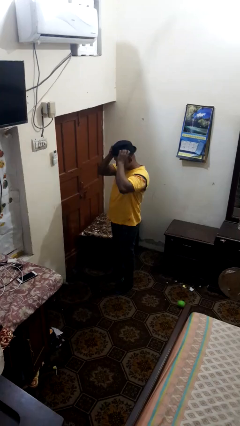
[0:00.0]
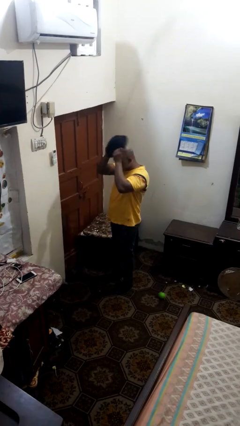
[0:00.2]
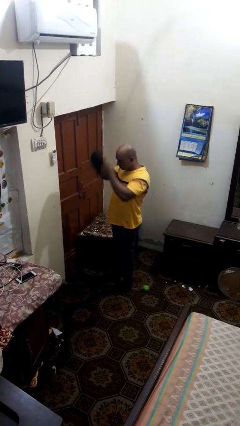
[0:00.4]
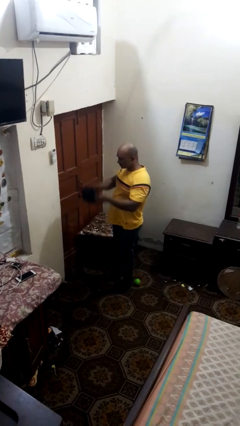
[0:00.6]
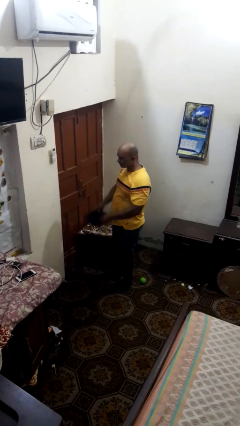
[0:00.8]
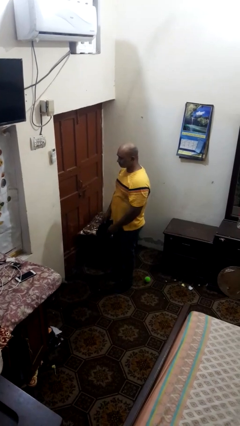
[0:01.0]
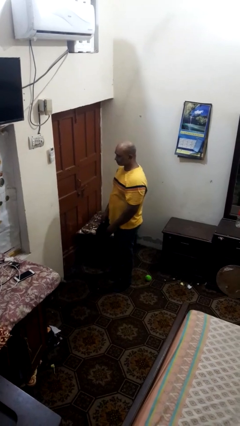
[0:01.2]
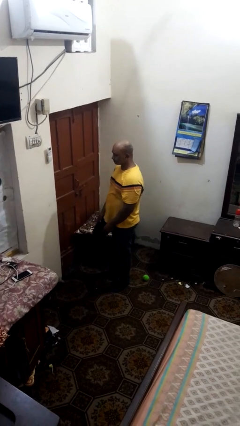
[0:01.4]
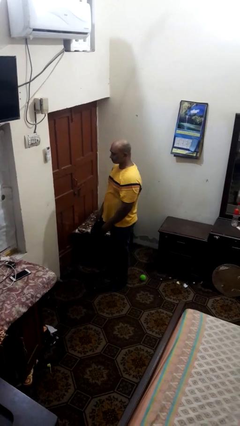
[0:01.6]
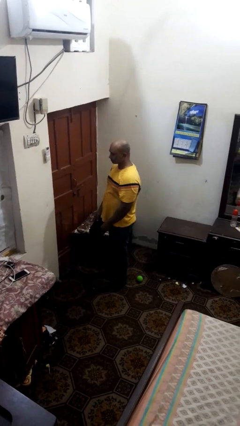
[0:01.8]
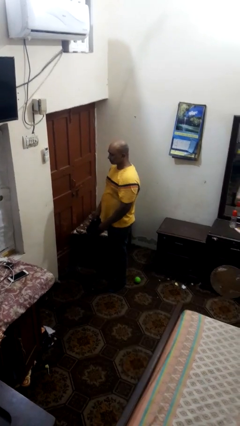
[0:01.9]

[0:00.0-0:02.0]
person takes off hat

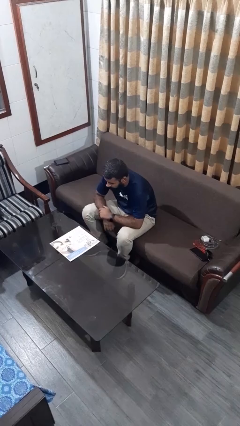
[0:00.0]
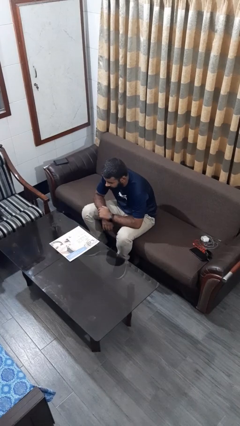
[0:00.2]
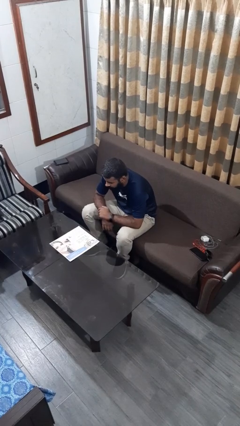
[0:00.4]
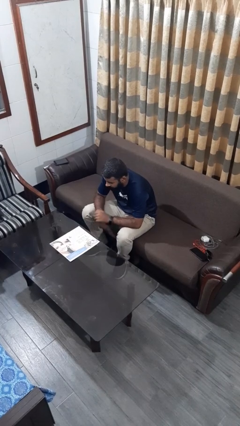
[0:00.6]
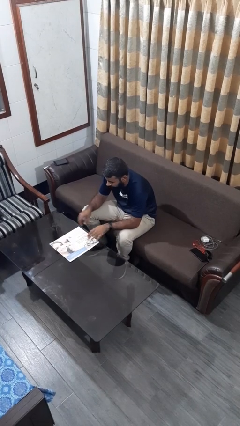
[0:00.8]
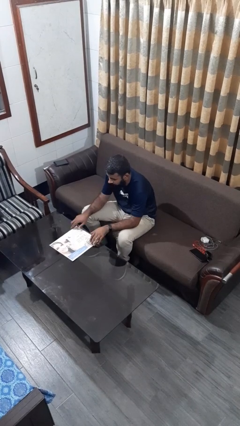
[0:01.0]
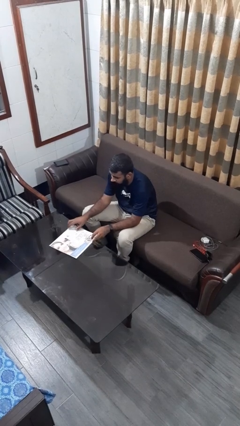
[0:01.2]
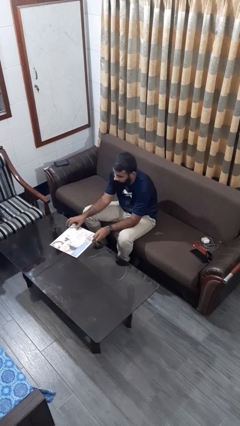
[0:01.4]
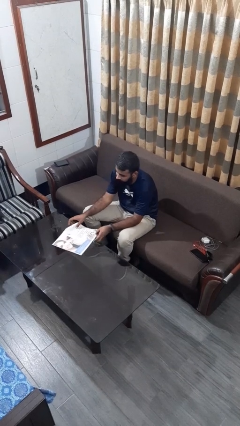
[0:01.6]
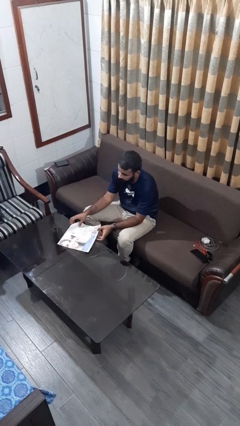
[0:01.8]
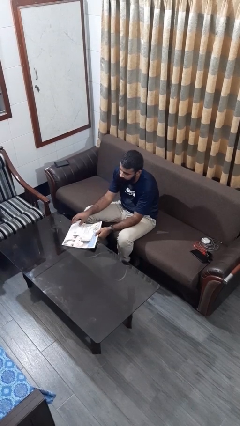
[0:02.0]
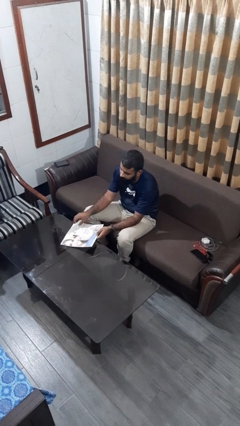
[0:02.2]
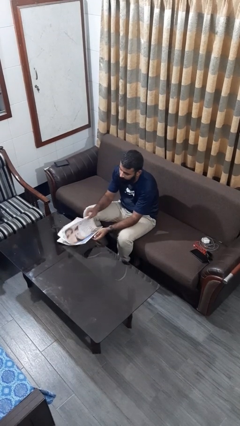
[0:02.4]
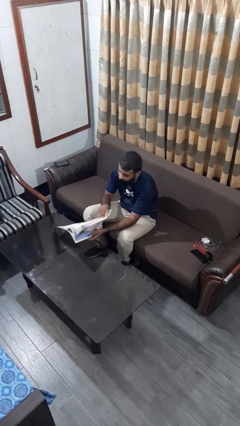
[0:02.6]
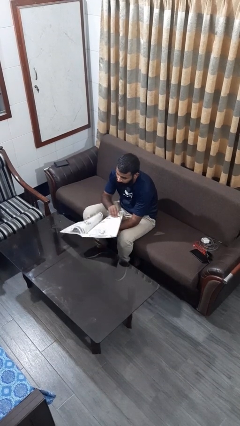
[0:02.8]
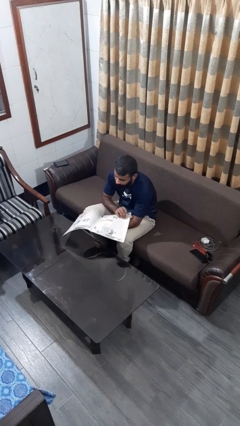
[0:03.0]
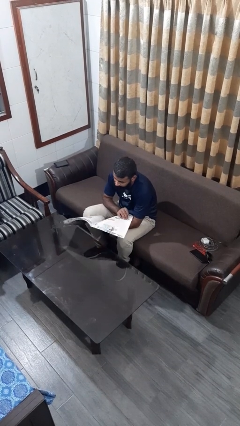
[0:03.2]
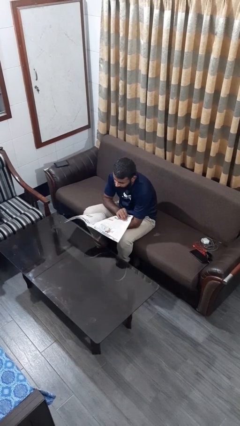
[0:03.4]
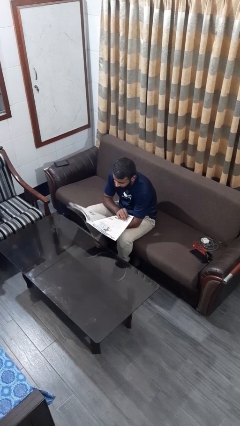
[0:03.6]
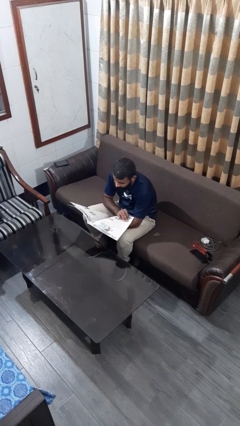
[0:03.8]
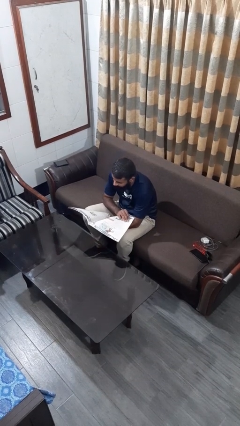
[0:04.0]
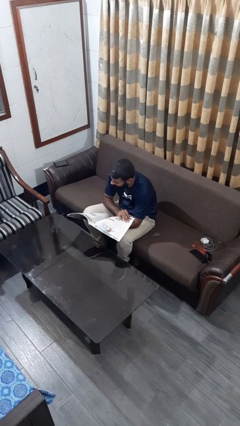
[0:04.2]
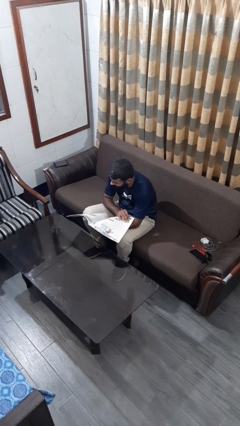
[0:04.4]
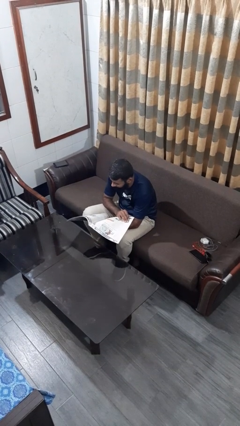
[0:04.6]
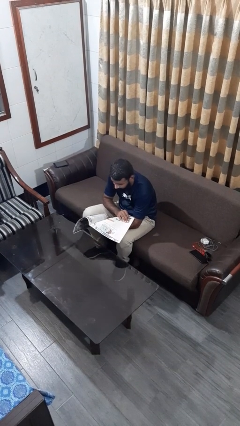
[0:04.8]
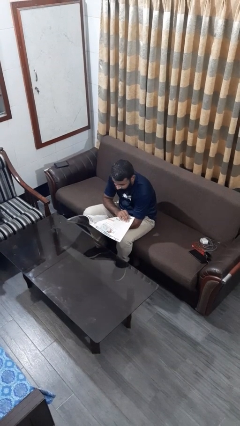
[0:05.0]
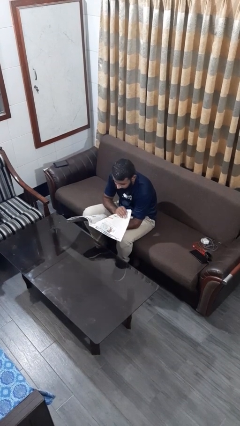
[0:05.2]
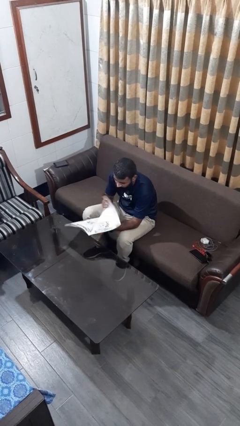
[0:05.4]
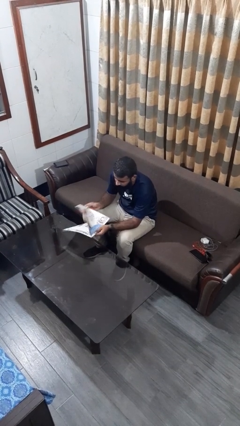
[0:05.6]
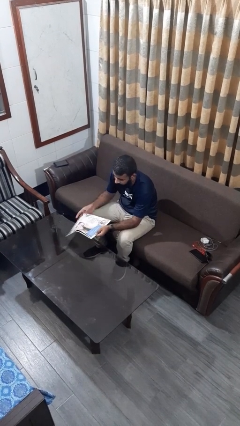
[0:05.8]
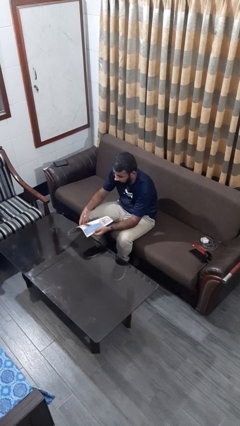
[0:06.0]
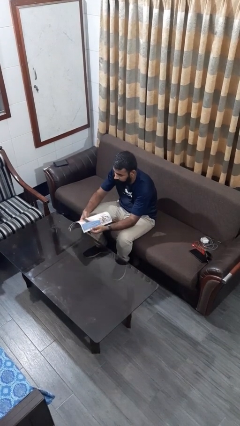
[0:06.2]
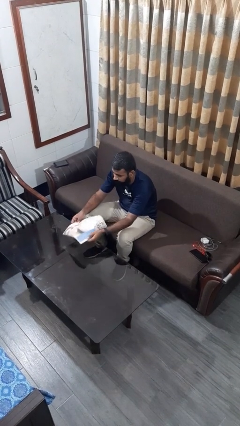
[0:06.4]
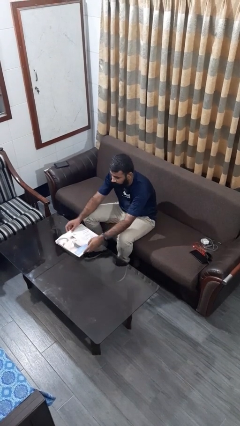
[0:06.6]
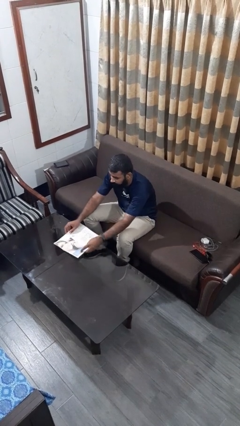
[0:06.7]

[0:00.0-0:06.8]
person reads magazine

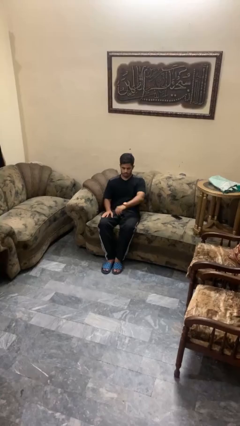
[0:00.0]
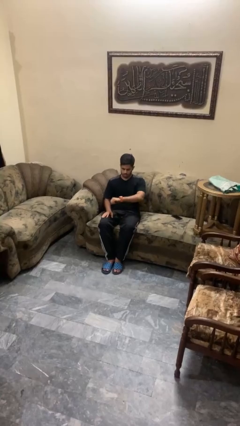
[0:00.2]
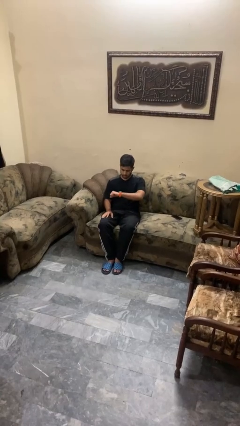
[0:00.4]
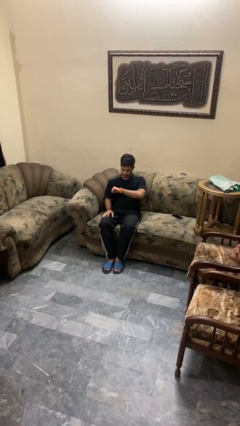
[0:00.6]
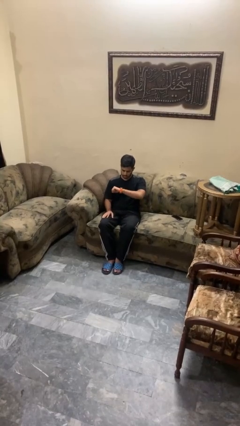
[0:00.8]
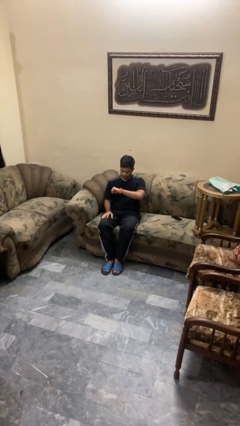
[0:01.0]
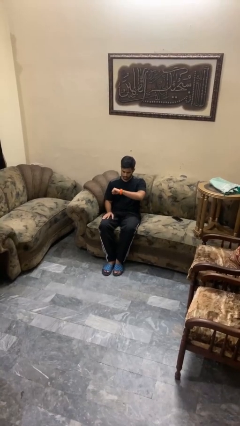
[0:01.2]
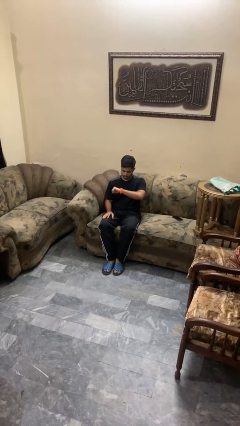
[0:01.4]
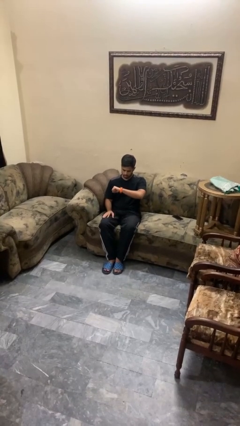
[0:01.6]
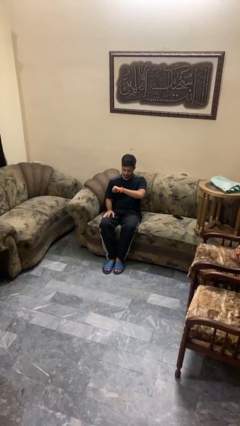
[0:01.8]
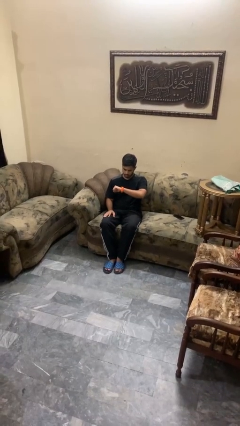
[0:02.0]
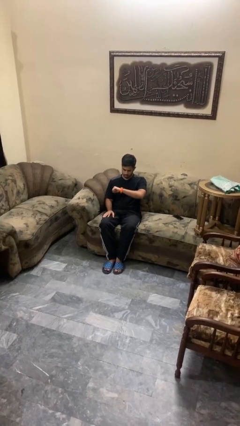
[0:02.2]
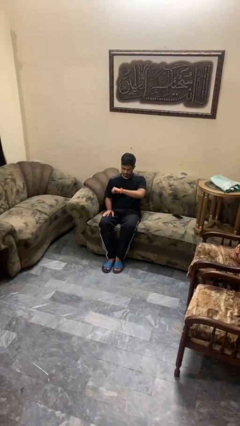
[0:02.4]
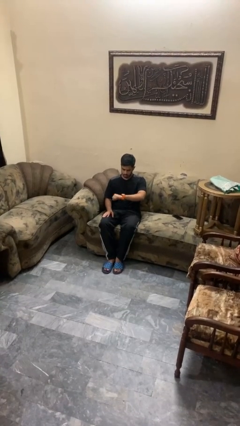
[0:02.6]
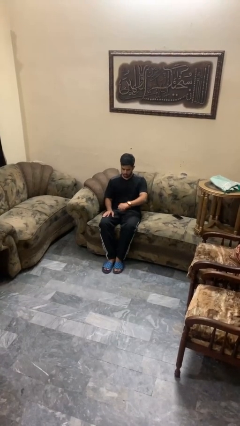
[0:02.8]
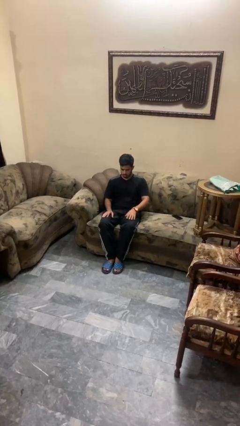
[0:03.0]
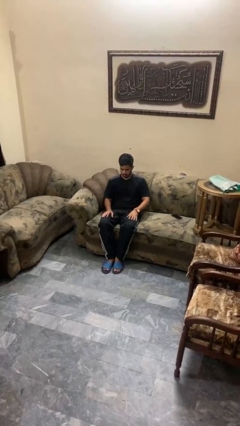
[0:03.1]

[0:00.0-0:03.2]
person looks at wristwatch

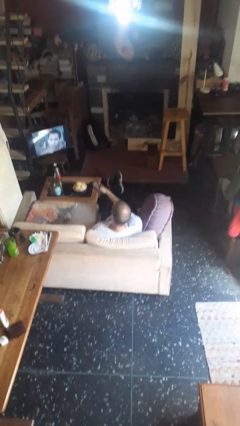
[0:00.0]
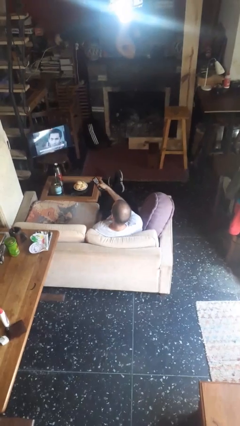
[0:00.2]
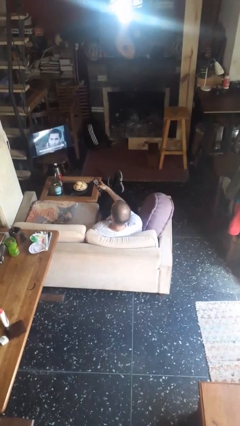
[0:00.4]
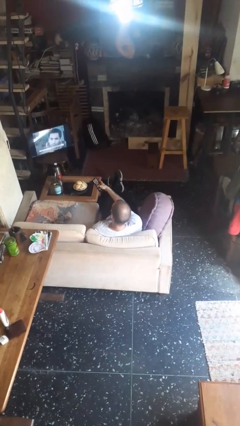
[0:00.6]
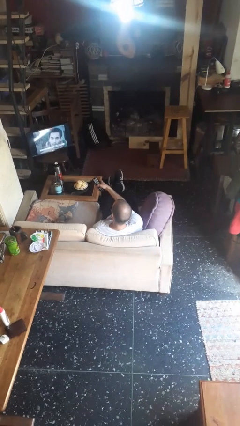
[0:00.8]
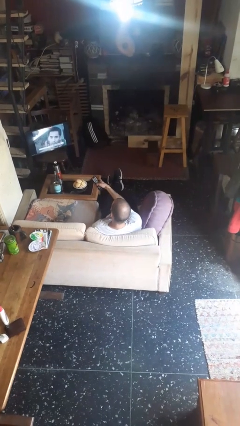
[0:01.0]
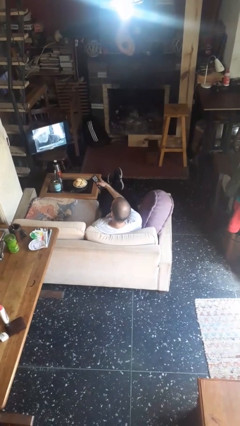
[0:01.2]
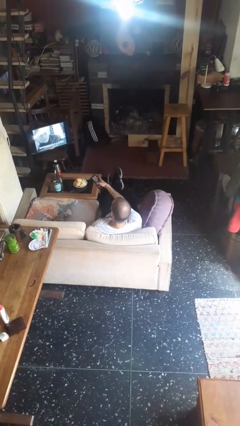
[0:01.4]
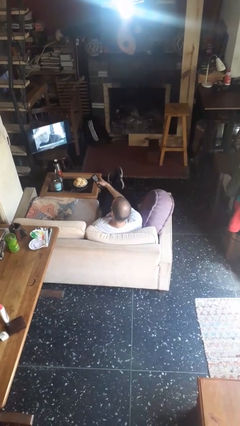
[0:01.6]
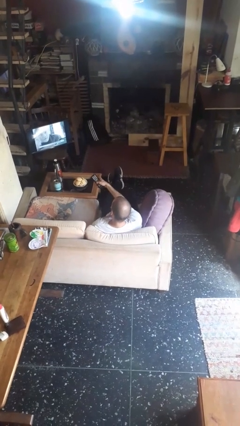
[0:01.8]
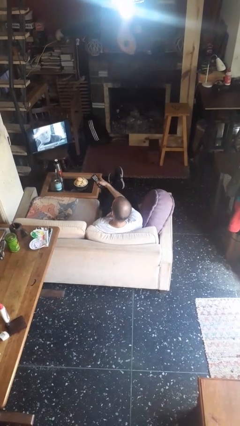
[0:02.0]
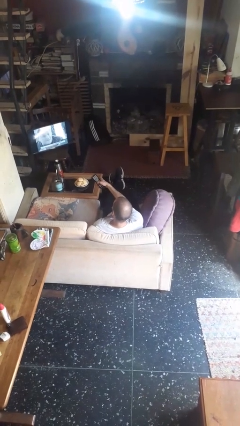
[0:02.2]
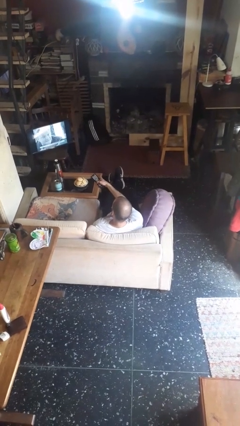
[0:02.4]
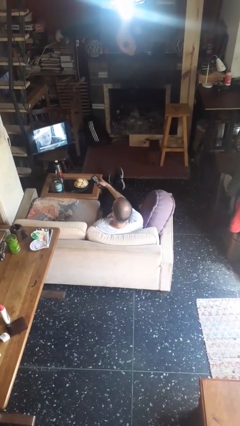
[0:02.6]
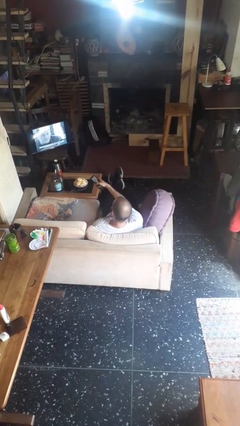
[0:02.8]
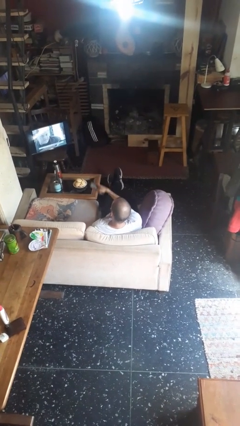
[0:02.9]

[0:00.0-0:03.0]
person uses television remote

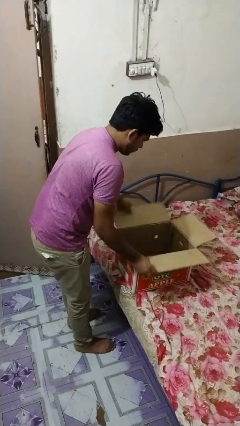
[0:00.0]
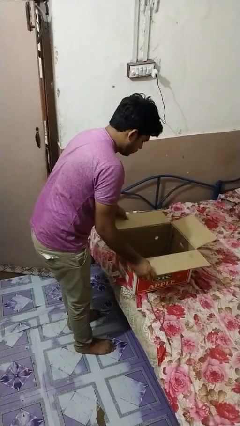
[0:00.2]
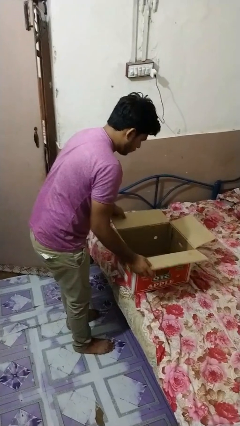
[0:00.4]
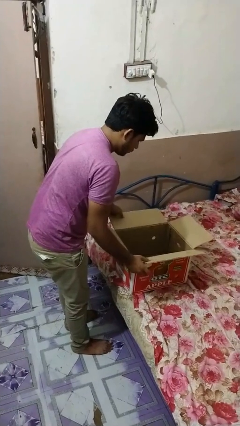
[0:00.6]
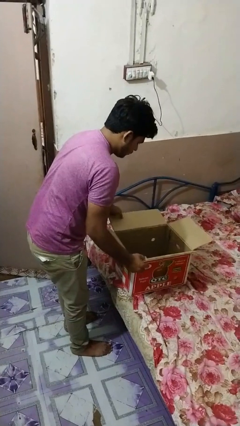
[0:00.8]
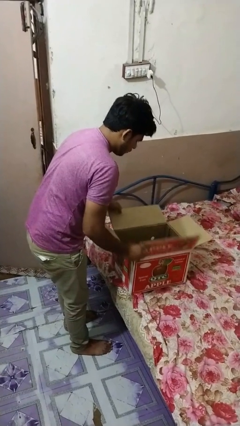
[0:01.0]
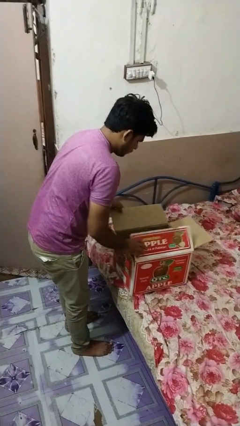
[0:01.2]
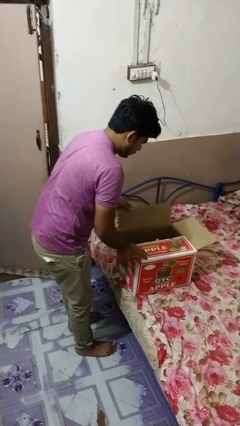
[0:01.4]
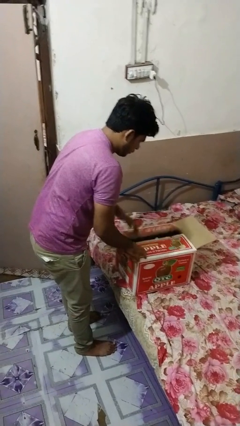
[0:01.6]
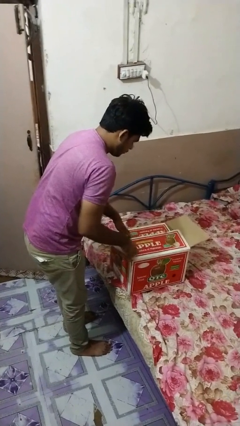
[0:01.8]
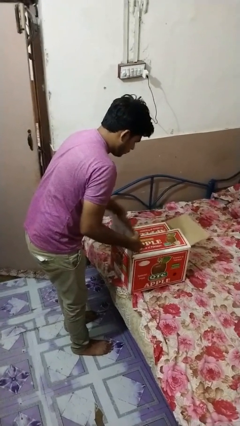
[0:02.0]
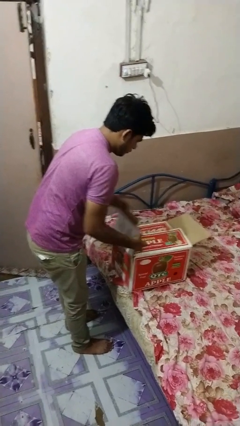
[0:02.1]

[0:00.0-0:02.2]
person opens box

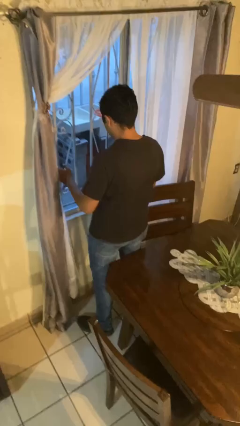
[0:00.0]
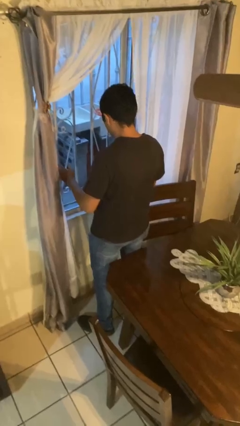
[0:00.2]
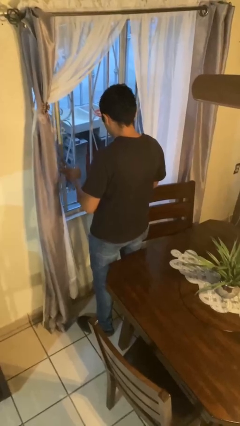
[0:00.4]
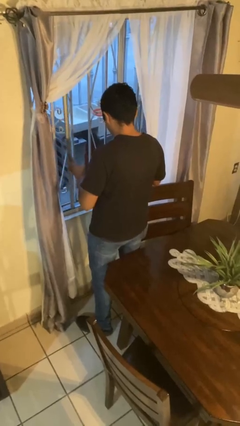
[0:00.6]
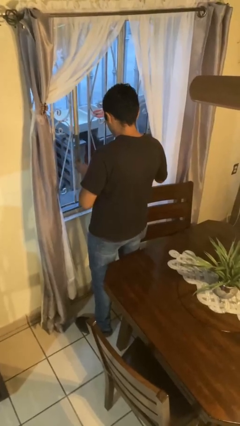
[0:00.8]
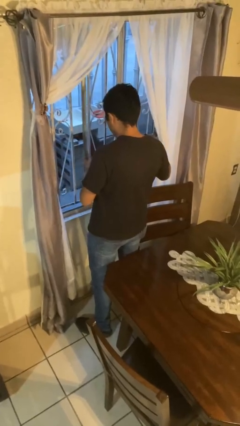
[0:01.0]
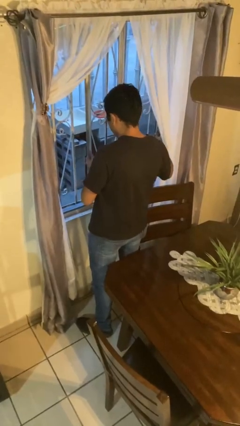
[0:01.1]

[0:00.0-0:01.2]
person opens home window
